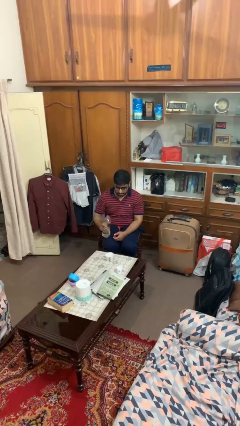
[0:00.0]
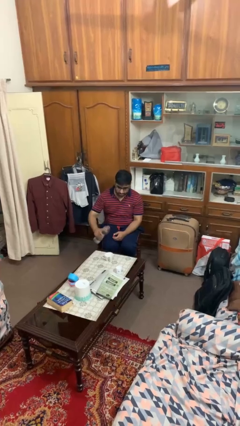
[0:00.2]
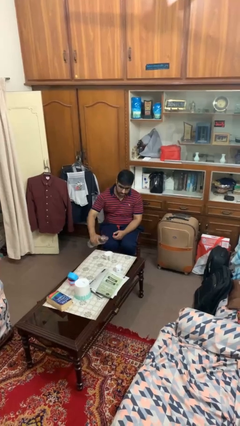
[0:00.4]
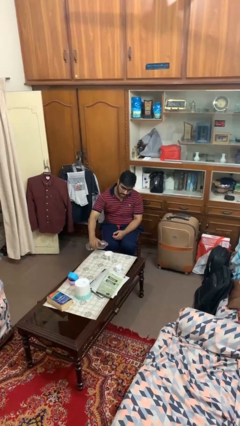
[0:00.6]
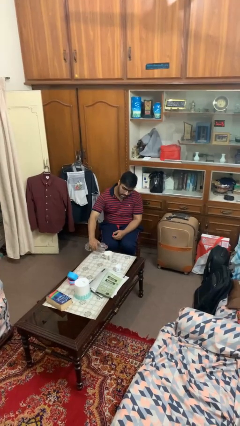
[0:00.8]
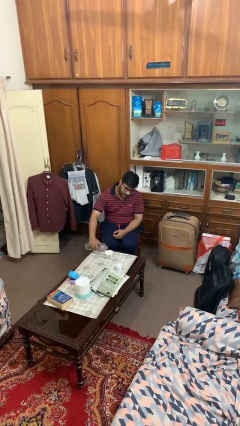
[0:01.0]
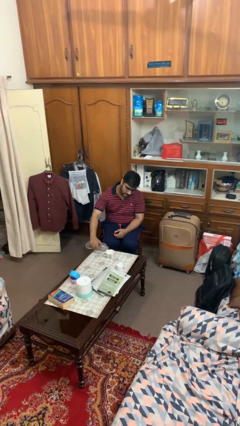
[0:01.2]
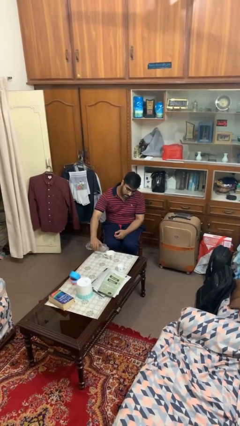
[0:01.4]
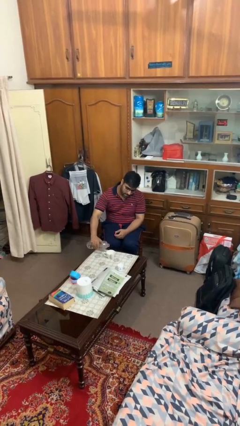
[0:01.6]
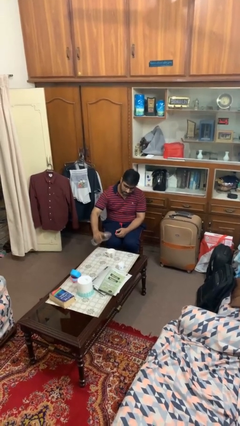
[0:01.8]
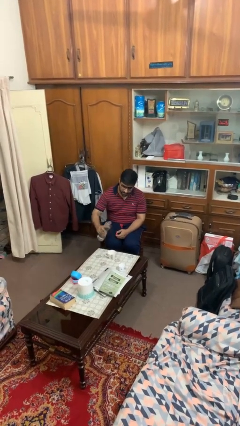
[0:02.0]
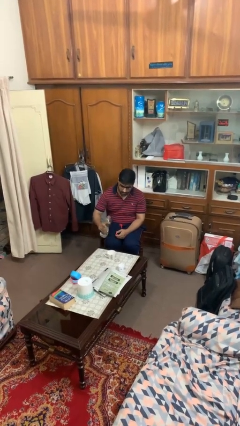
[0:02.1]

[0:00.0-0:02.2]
person pours liquid into cup

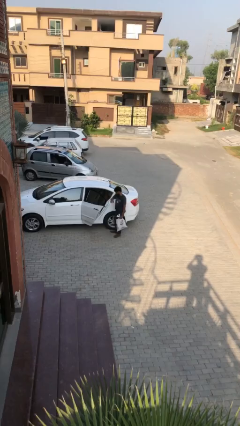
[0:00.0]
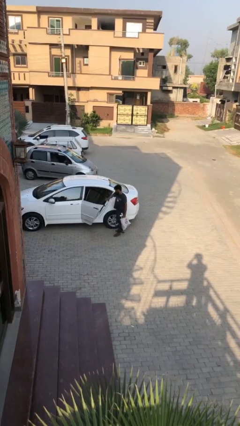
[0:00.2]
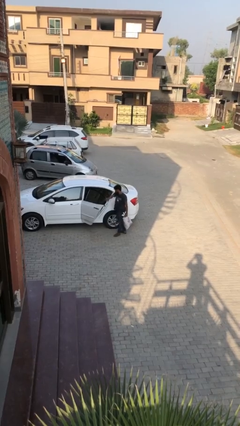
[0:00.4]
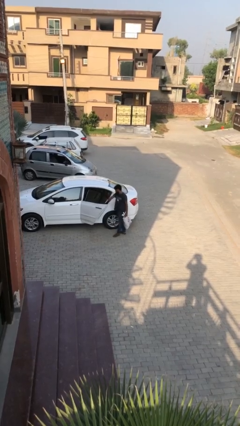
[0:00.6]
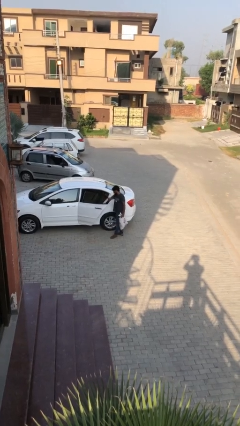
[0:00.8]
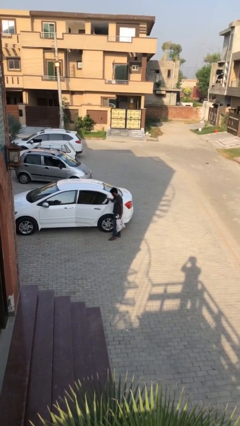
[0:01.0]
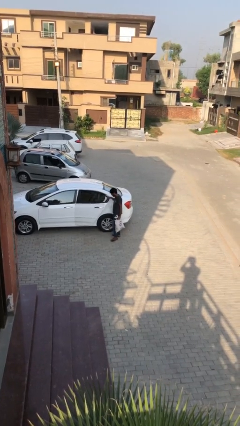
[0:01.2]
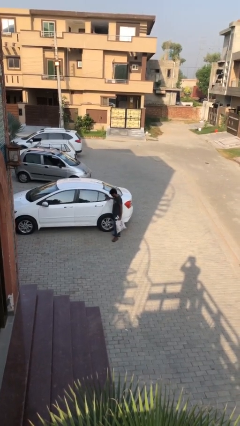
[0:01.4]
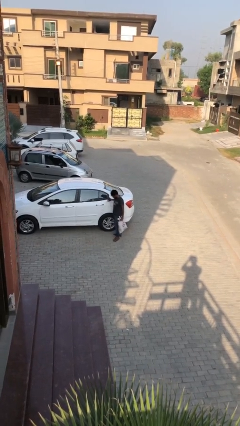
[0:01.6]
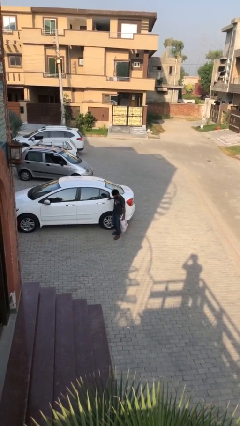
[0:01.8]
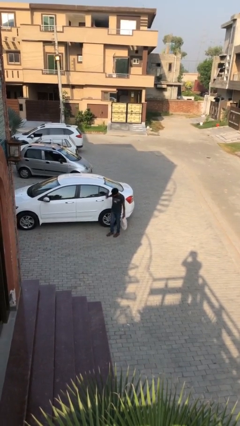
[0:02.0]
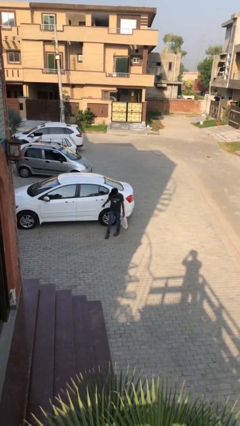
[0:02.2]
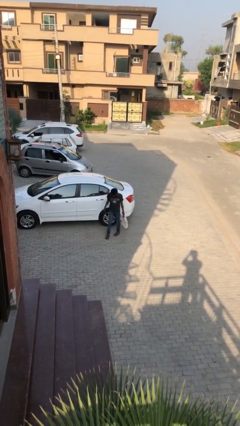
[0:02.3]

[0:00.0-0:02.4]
person closes car door

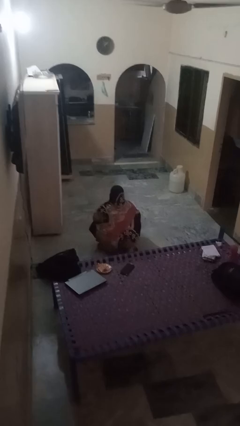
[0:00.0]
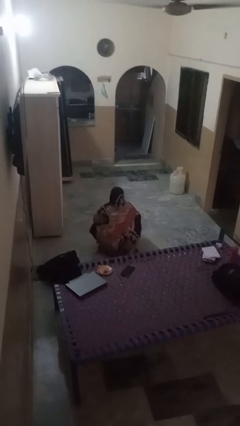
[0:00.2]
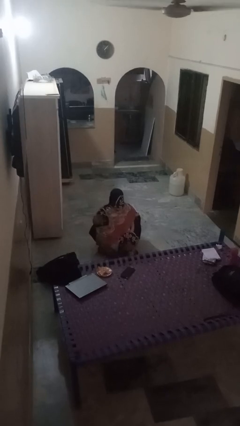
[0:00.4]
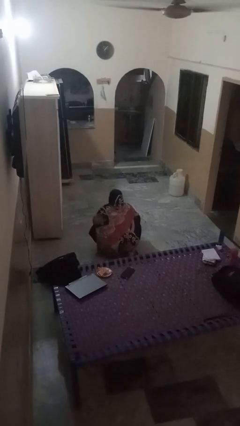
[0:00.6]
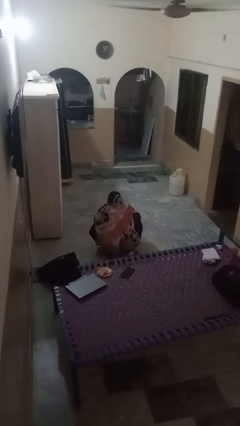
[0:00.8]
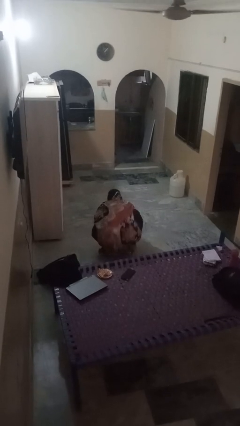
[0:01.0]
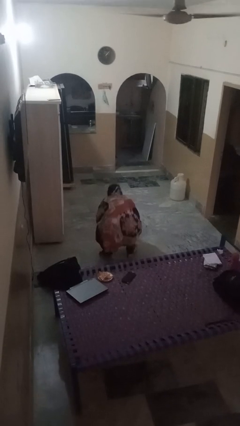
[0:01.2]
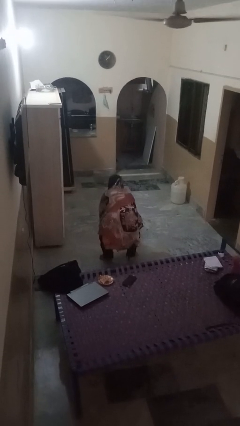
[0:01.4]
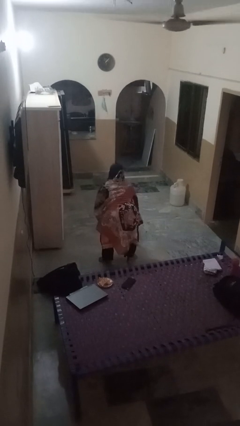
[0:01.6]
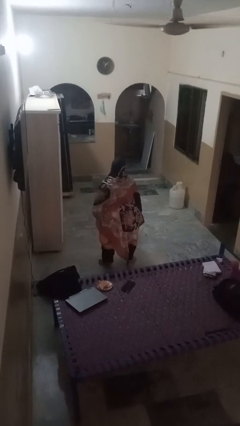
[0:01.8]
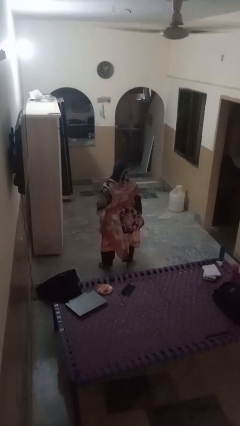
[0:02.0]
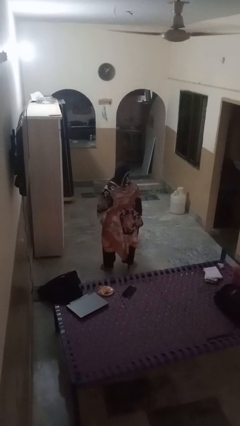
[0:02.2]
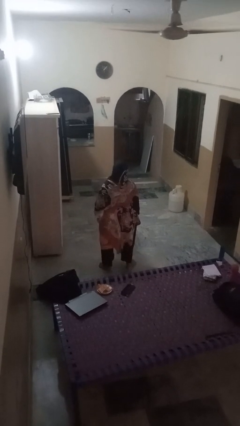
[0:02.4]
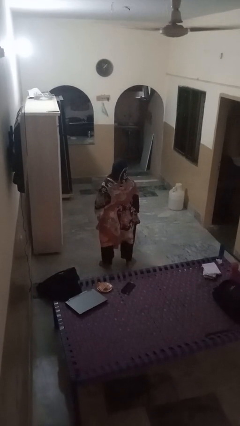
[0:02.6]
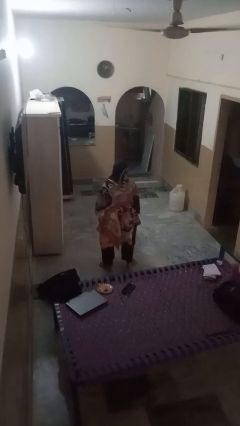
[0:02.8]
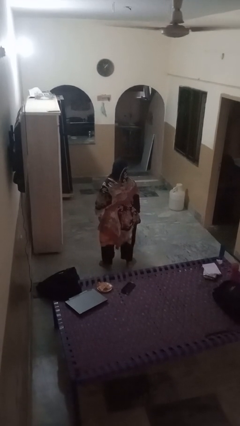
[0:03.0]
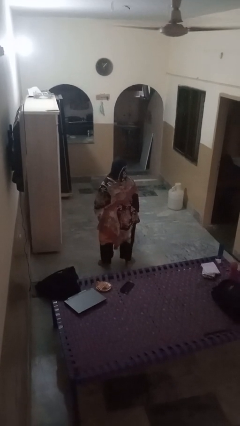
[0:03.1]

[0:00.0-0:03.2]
person stands up

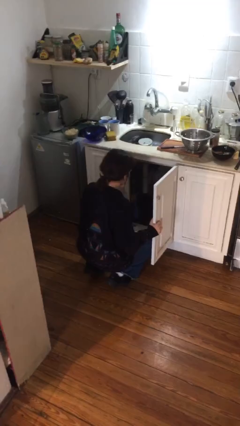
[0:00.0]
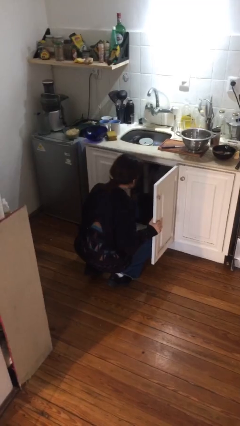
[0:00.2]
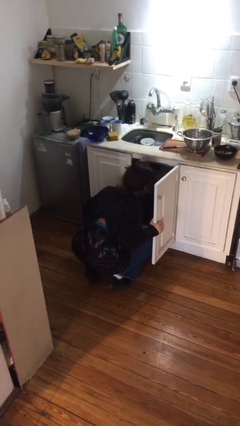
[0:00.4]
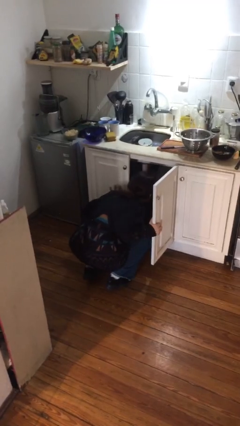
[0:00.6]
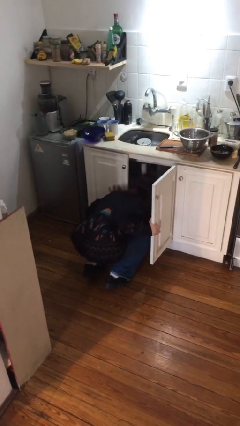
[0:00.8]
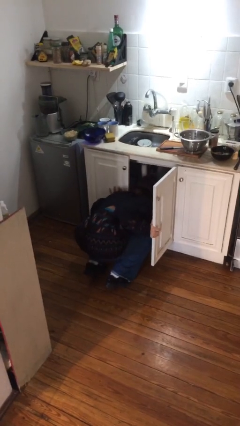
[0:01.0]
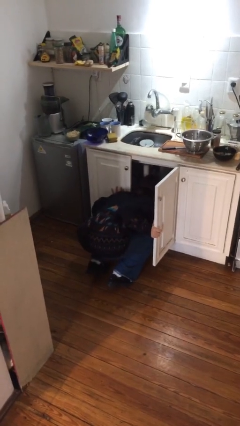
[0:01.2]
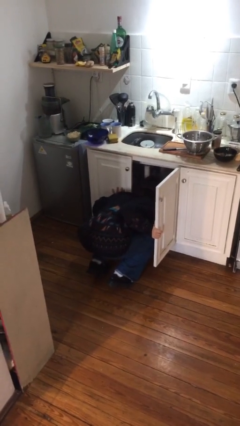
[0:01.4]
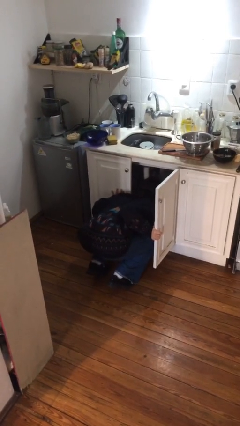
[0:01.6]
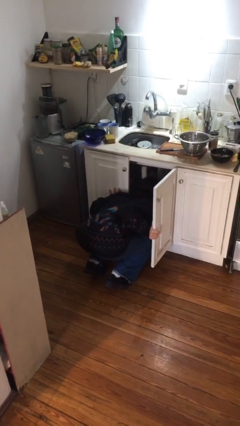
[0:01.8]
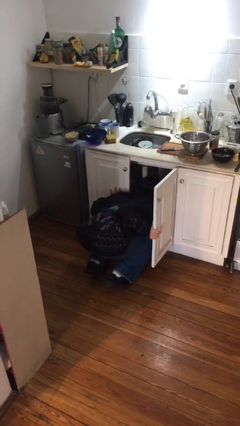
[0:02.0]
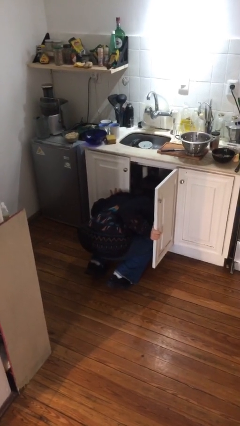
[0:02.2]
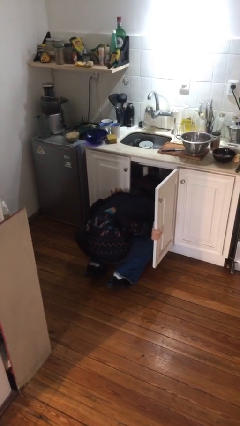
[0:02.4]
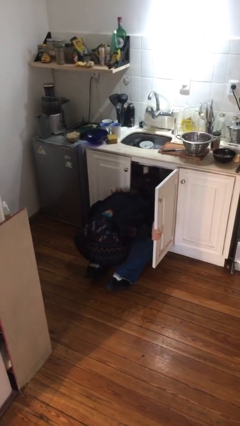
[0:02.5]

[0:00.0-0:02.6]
person searches in cabinet

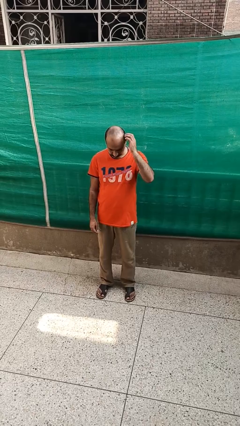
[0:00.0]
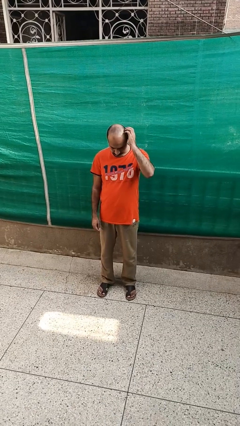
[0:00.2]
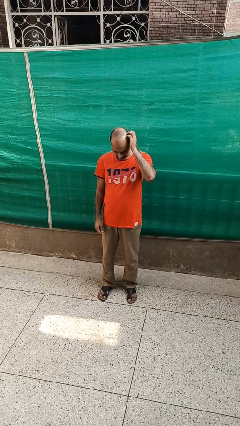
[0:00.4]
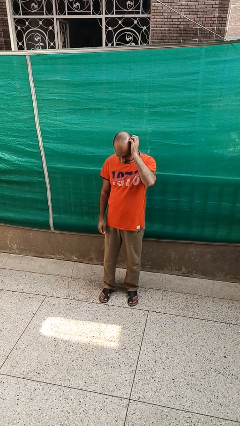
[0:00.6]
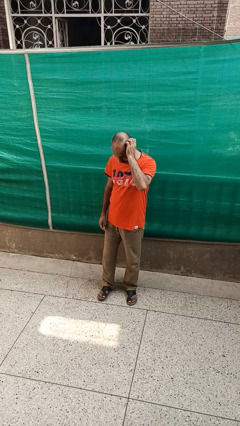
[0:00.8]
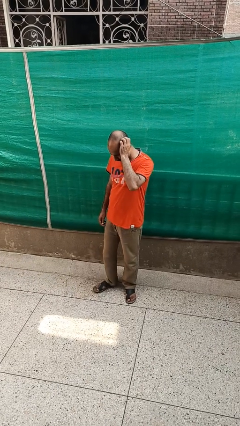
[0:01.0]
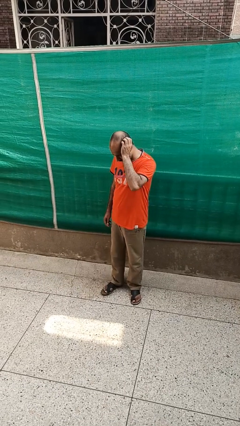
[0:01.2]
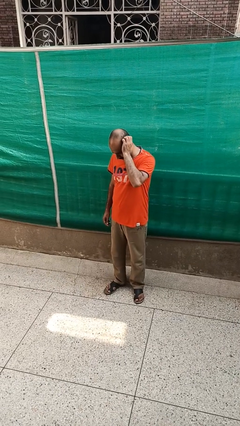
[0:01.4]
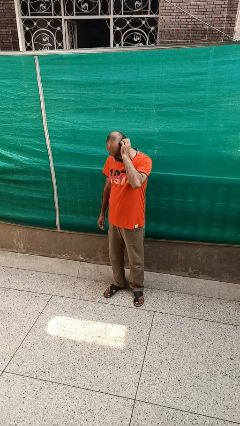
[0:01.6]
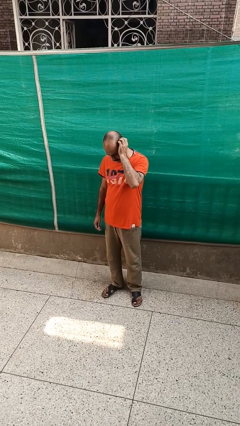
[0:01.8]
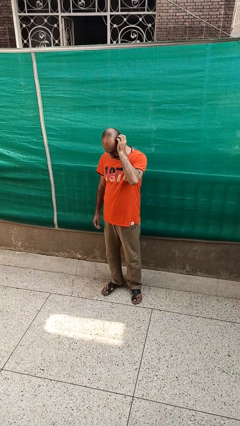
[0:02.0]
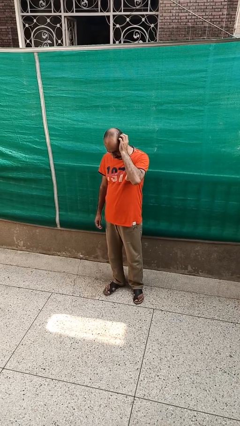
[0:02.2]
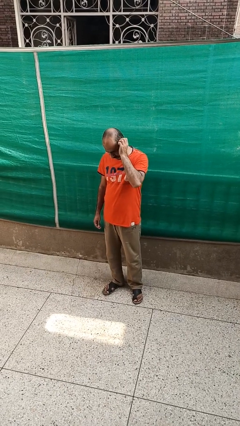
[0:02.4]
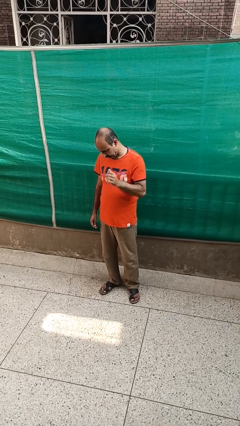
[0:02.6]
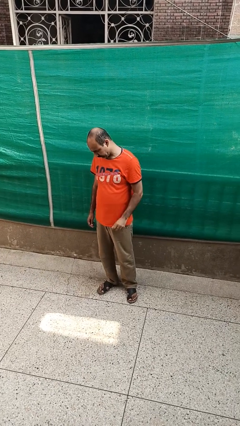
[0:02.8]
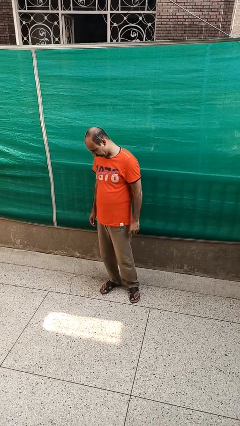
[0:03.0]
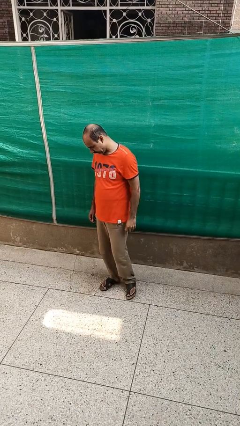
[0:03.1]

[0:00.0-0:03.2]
person scratches face

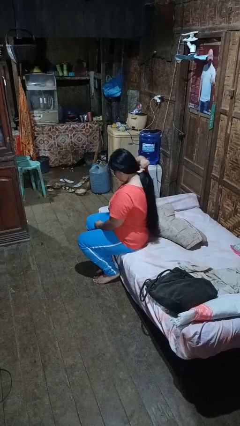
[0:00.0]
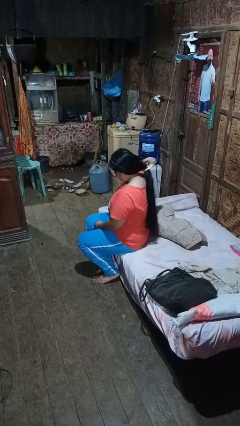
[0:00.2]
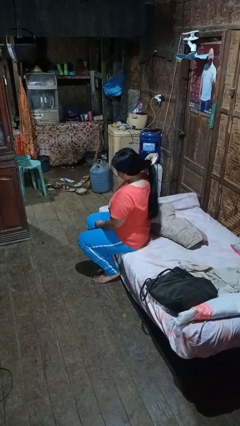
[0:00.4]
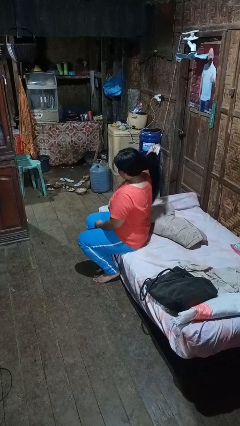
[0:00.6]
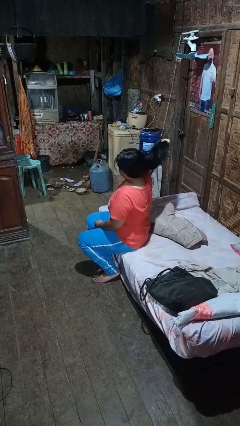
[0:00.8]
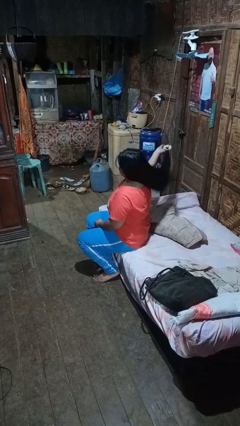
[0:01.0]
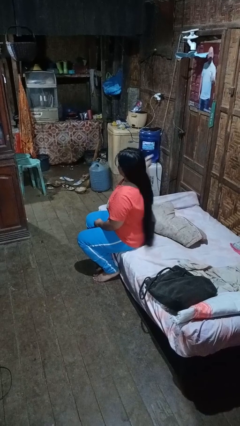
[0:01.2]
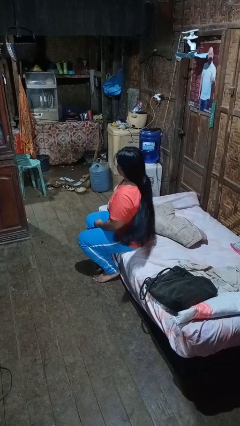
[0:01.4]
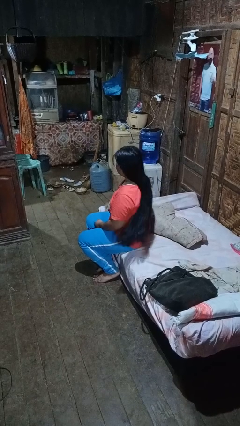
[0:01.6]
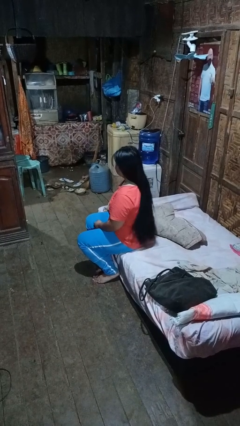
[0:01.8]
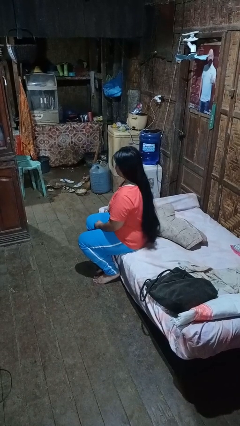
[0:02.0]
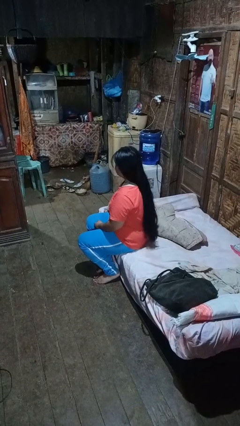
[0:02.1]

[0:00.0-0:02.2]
person takes off hairtie

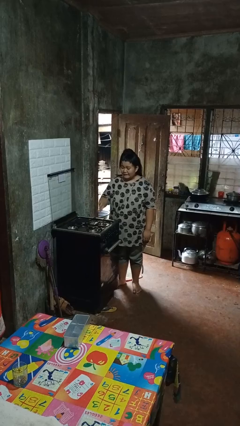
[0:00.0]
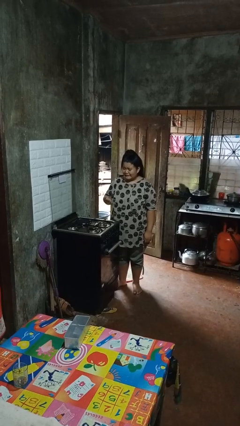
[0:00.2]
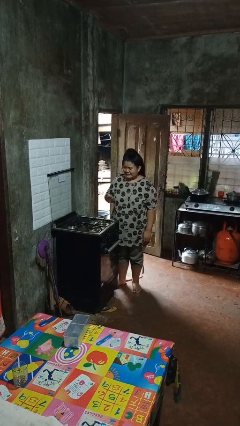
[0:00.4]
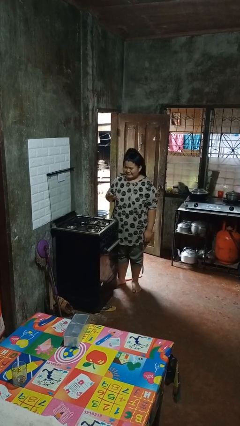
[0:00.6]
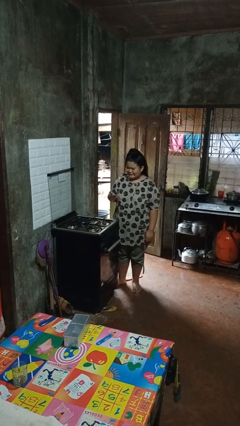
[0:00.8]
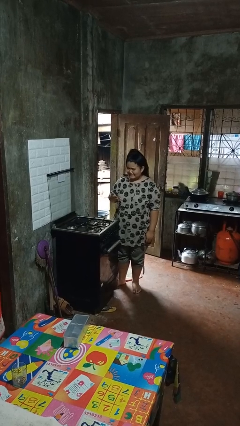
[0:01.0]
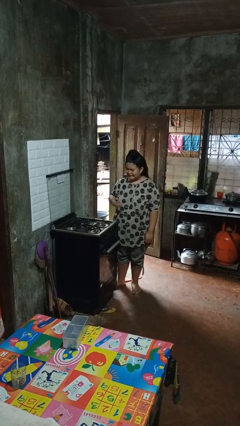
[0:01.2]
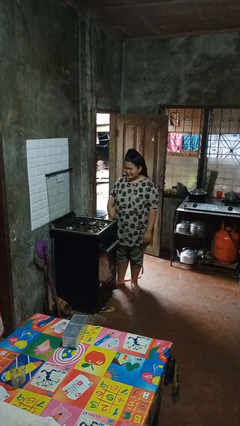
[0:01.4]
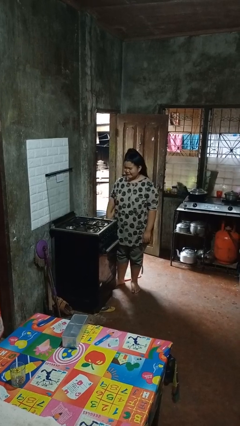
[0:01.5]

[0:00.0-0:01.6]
person burns hand
